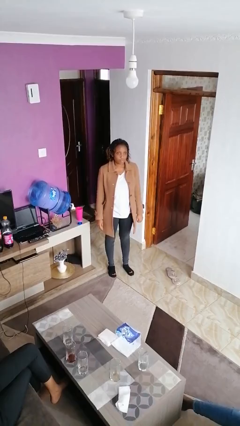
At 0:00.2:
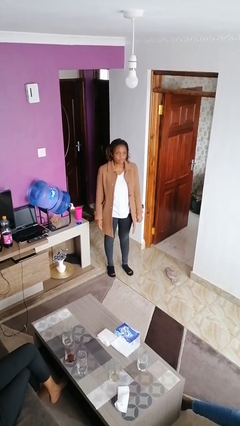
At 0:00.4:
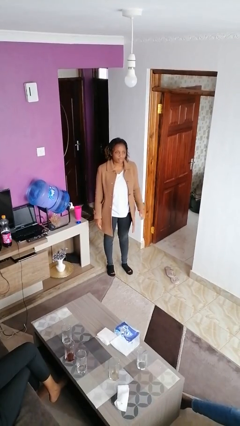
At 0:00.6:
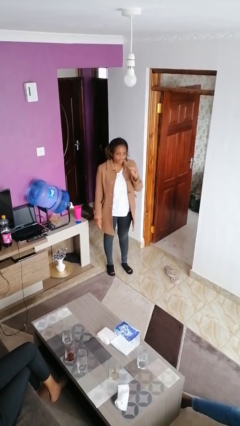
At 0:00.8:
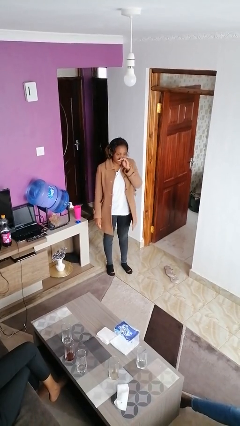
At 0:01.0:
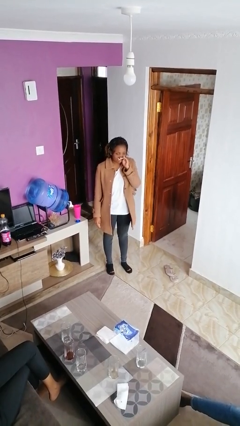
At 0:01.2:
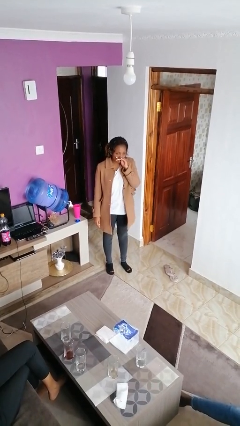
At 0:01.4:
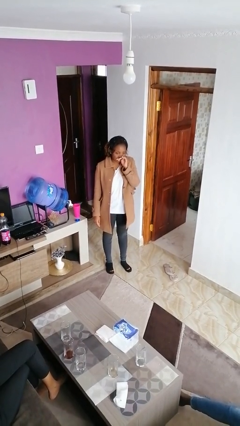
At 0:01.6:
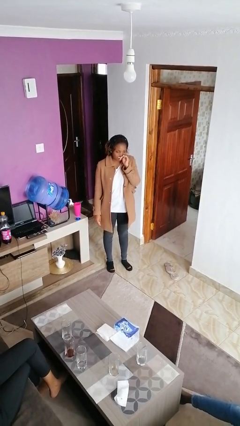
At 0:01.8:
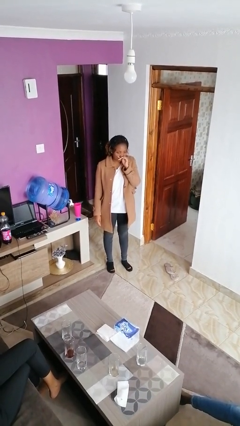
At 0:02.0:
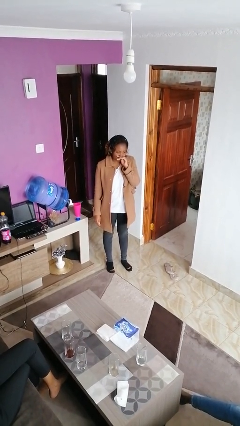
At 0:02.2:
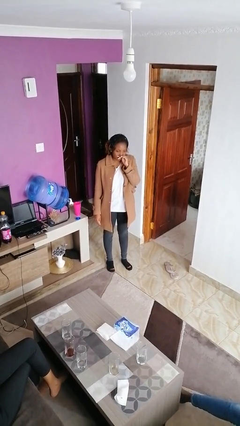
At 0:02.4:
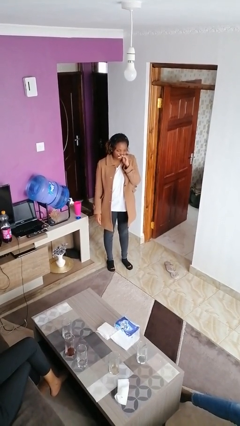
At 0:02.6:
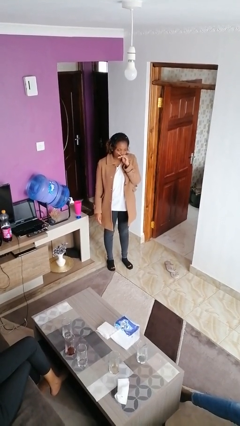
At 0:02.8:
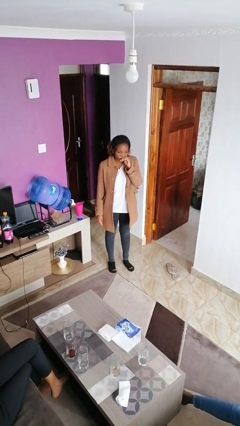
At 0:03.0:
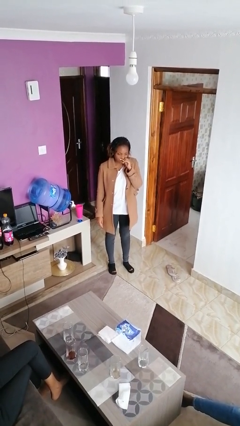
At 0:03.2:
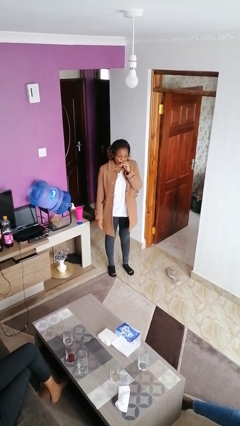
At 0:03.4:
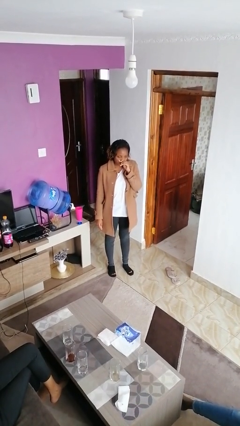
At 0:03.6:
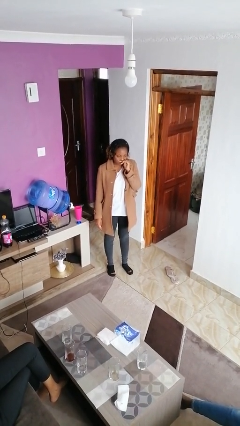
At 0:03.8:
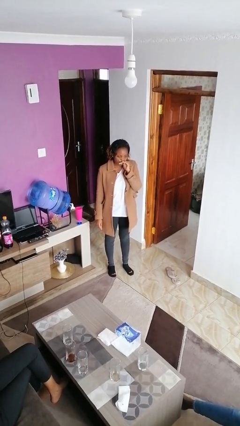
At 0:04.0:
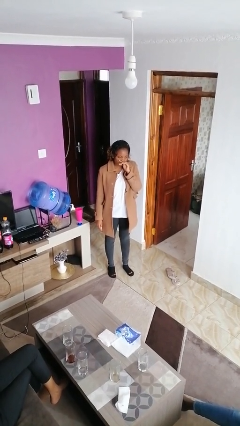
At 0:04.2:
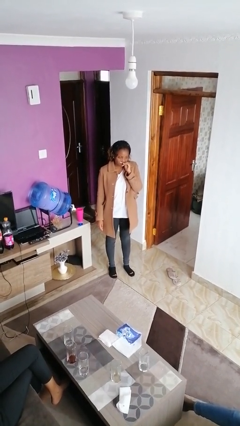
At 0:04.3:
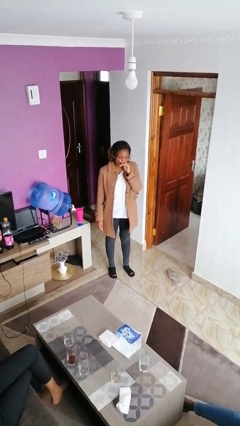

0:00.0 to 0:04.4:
person scratches face

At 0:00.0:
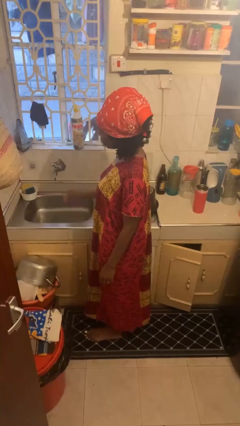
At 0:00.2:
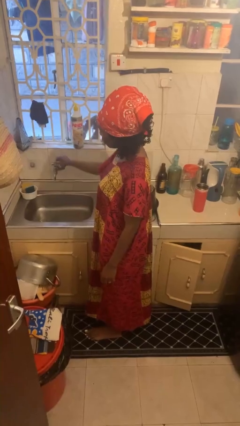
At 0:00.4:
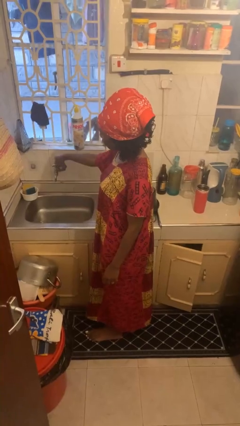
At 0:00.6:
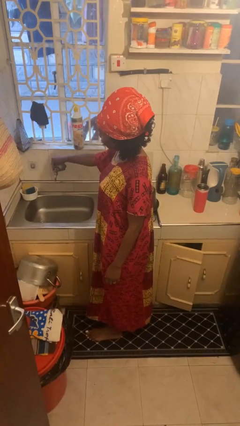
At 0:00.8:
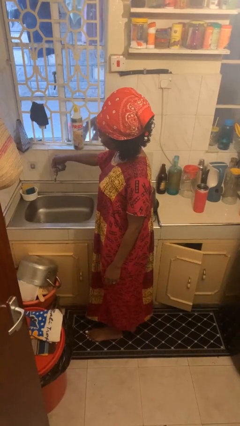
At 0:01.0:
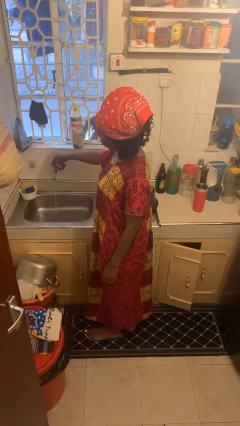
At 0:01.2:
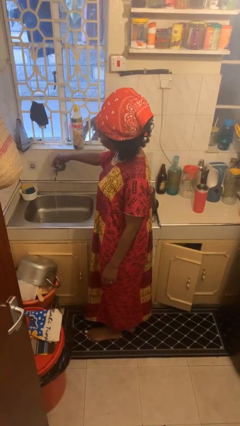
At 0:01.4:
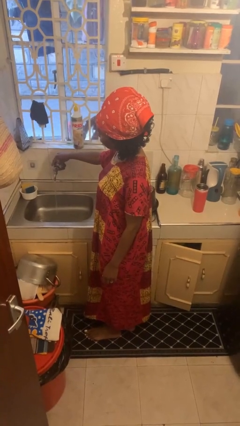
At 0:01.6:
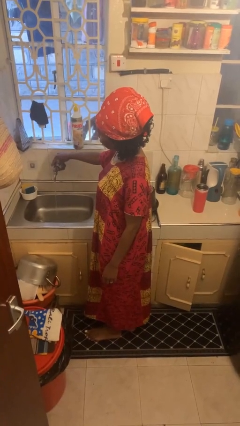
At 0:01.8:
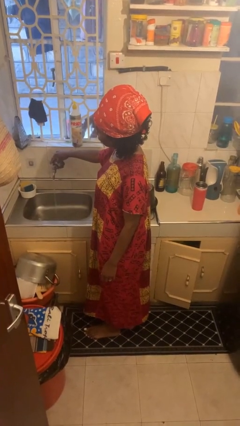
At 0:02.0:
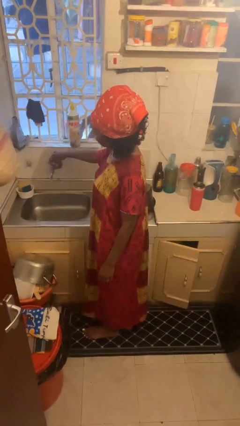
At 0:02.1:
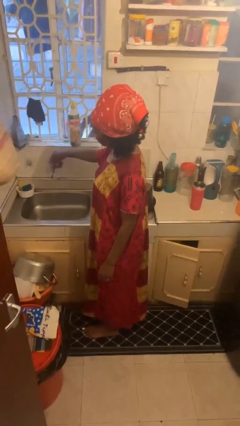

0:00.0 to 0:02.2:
person turns on faucet

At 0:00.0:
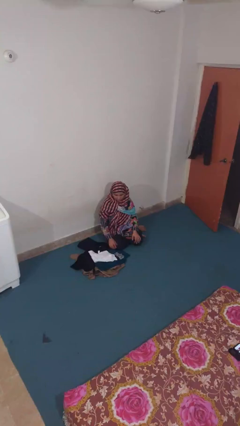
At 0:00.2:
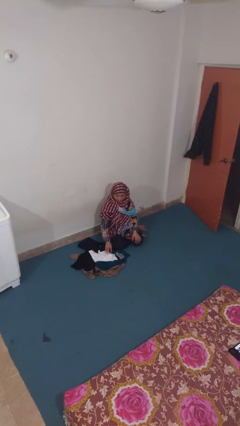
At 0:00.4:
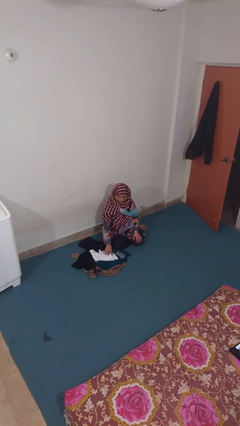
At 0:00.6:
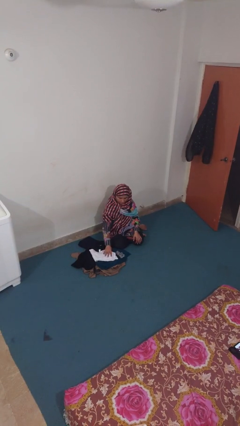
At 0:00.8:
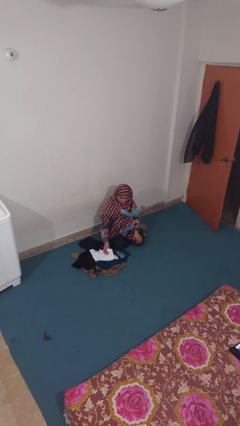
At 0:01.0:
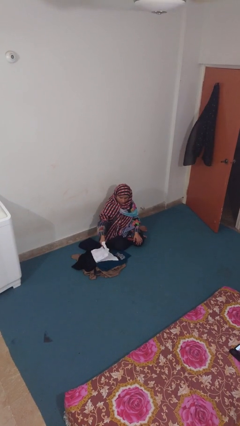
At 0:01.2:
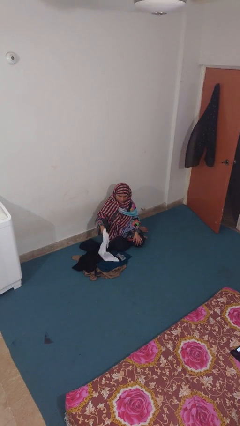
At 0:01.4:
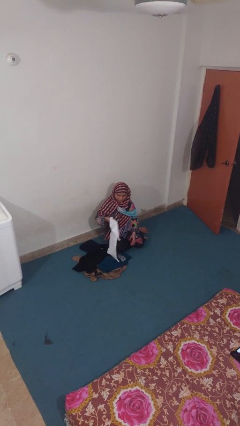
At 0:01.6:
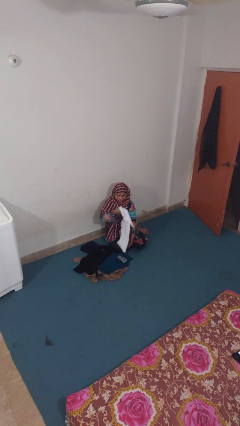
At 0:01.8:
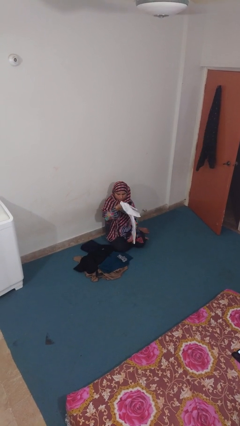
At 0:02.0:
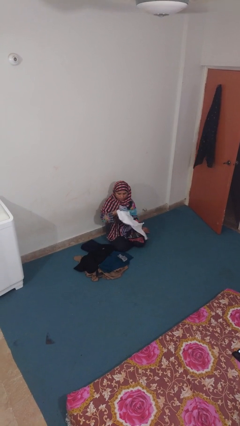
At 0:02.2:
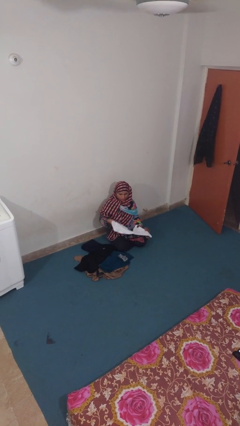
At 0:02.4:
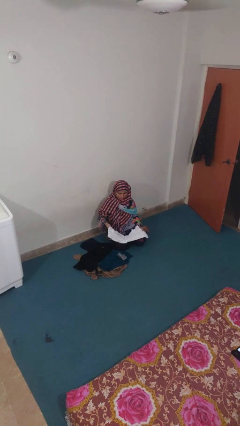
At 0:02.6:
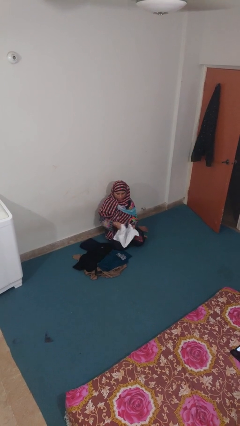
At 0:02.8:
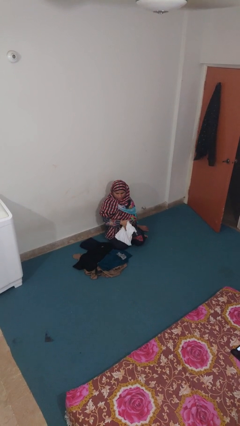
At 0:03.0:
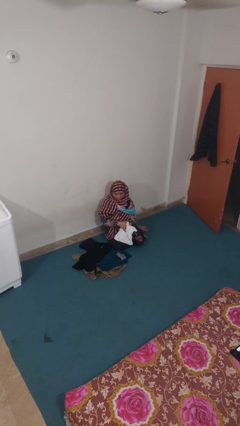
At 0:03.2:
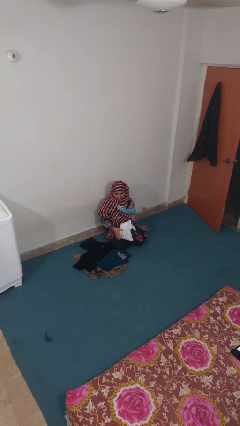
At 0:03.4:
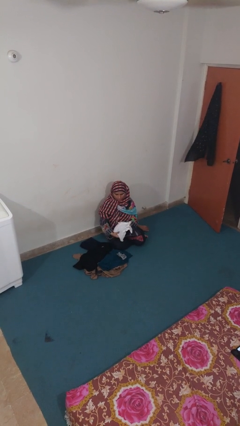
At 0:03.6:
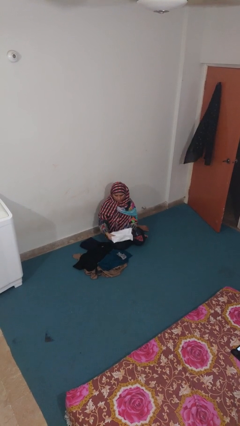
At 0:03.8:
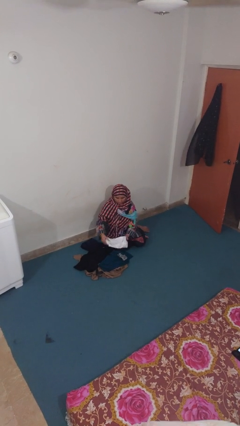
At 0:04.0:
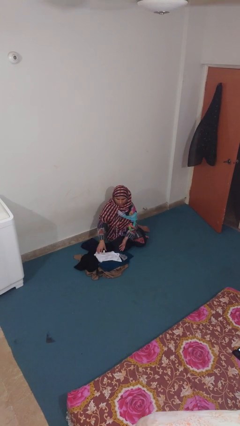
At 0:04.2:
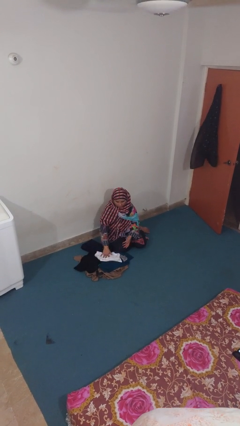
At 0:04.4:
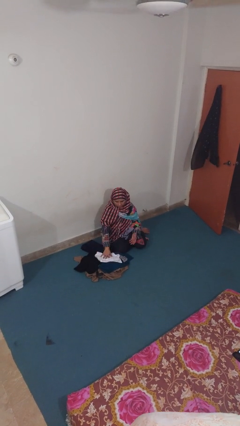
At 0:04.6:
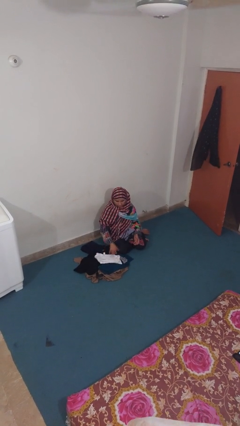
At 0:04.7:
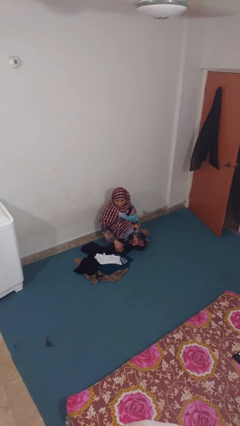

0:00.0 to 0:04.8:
person folds shirt

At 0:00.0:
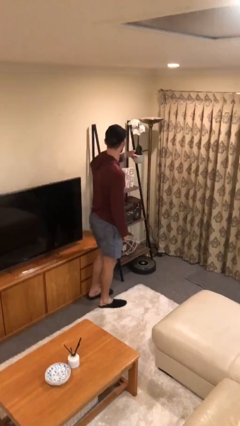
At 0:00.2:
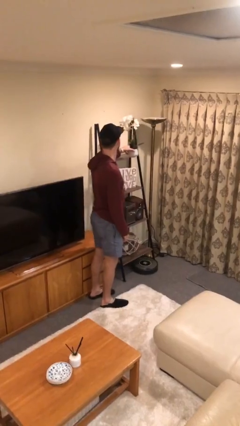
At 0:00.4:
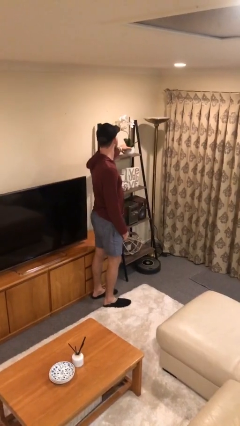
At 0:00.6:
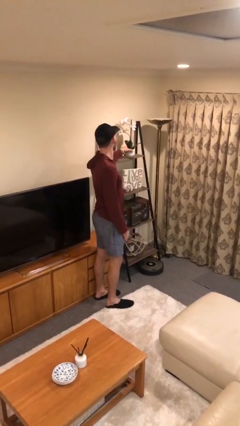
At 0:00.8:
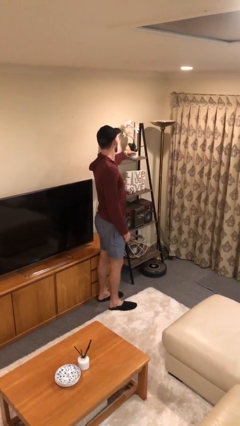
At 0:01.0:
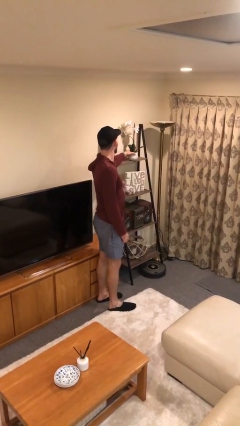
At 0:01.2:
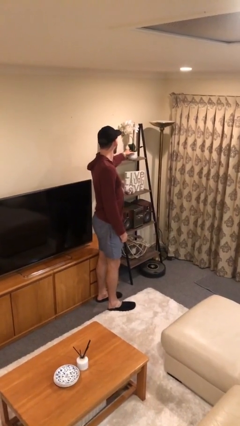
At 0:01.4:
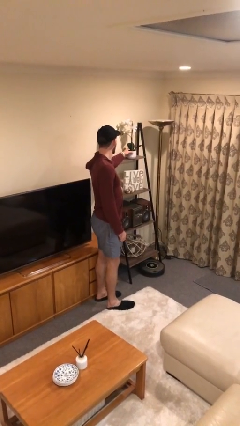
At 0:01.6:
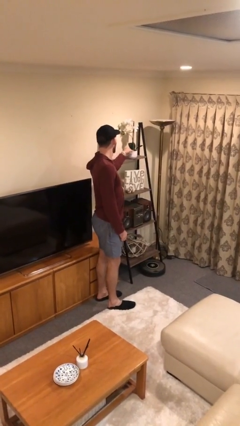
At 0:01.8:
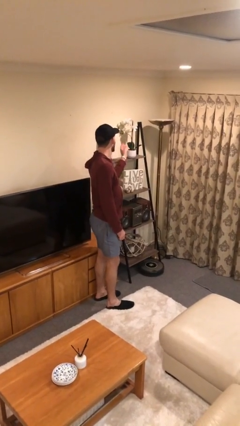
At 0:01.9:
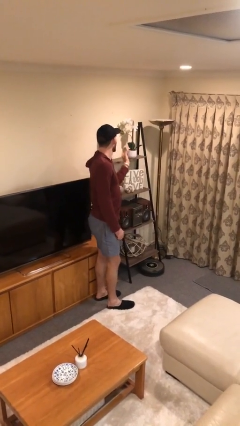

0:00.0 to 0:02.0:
person puts down object on shelf

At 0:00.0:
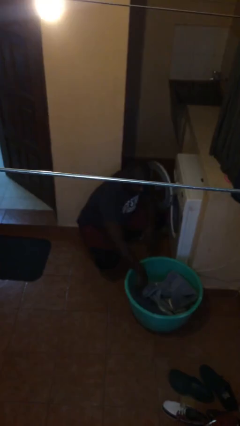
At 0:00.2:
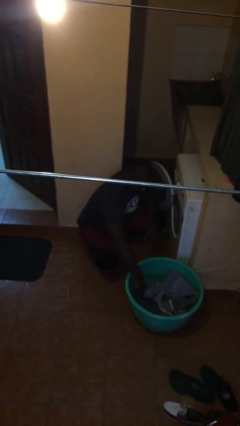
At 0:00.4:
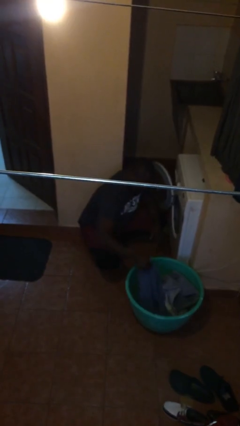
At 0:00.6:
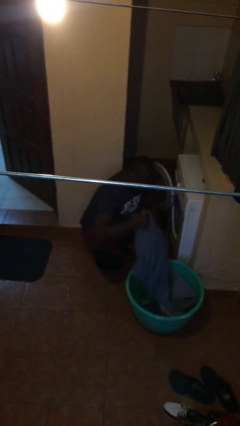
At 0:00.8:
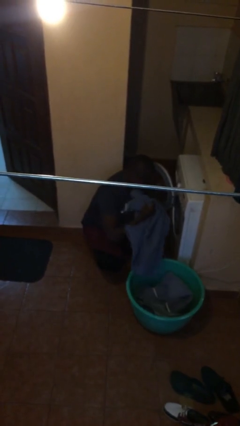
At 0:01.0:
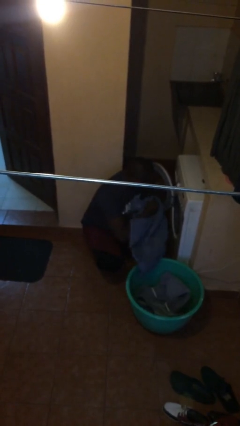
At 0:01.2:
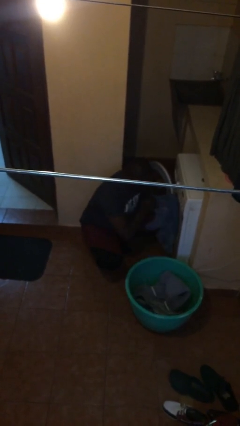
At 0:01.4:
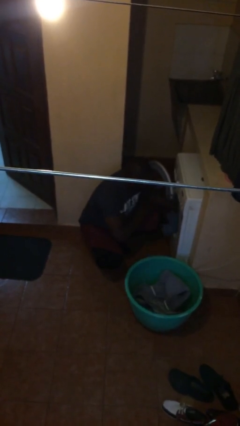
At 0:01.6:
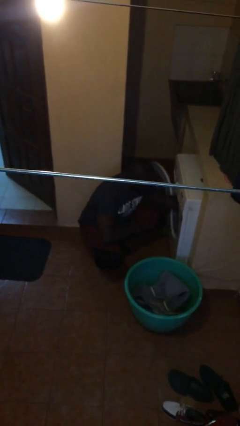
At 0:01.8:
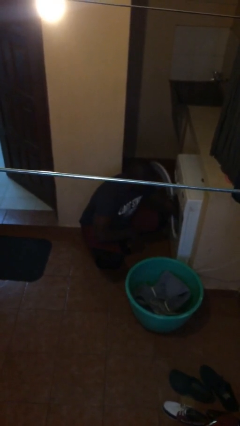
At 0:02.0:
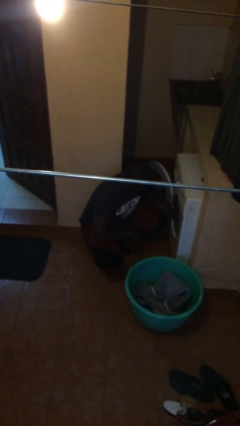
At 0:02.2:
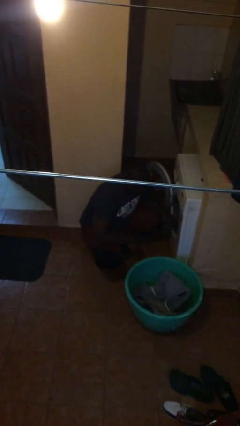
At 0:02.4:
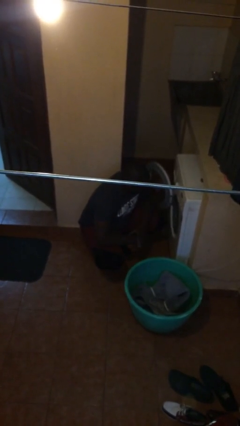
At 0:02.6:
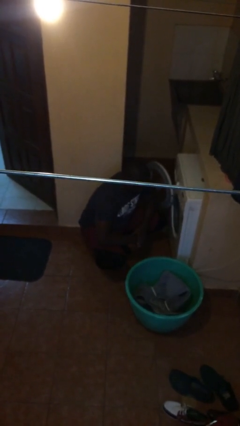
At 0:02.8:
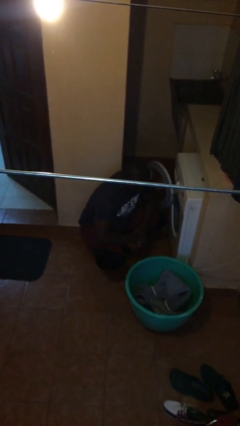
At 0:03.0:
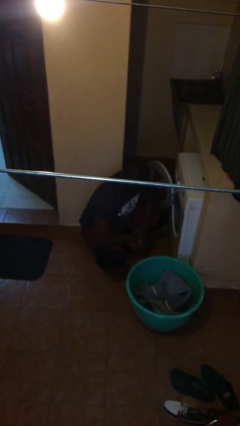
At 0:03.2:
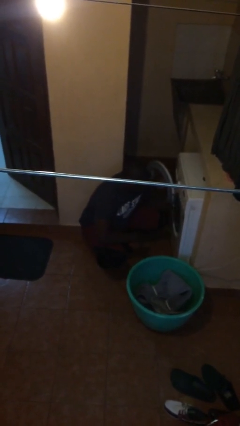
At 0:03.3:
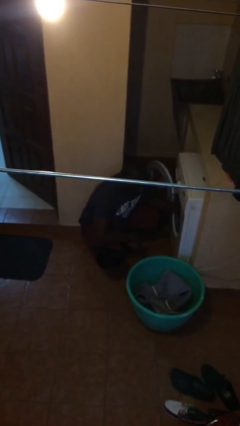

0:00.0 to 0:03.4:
person loads dryer

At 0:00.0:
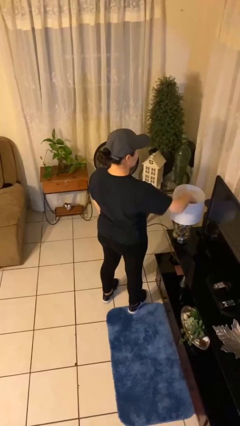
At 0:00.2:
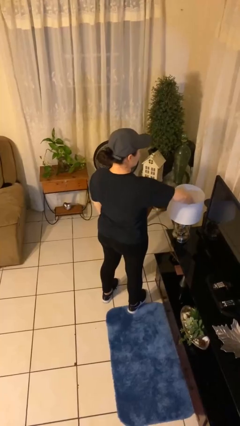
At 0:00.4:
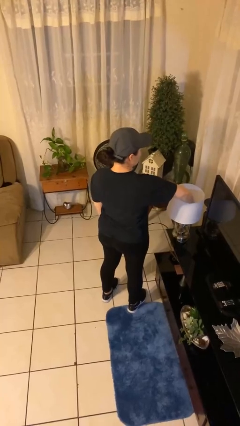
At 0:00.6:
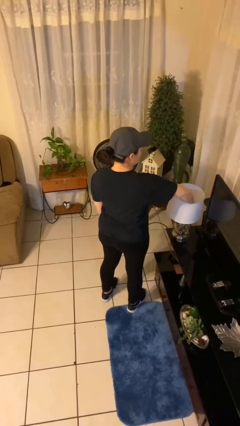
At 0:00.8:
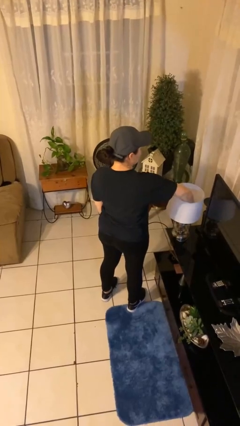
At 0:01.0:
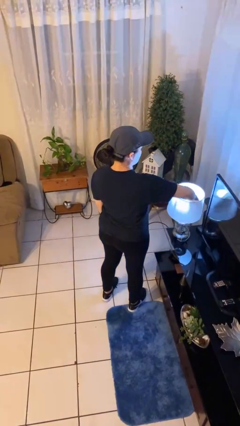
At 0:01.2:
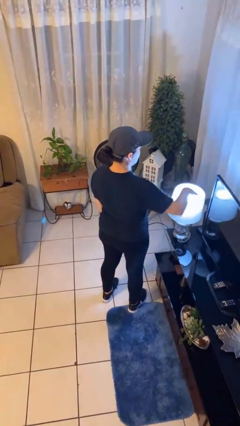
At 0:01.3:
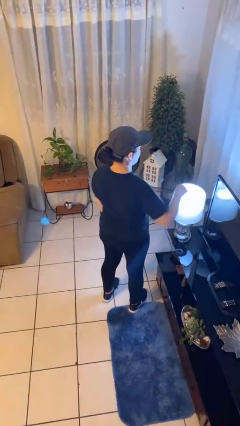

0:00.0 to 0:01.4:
person turns on lamp
